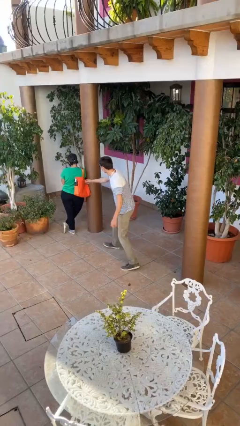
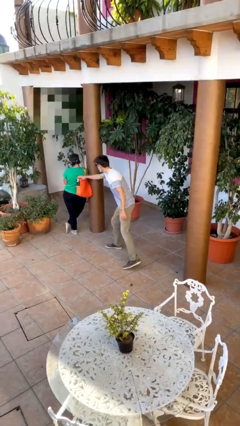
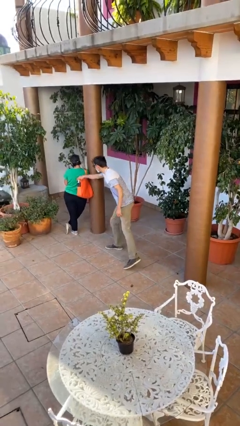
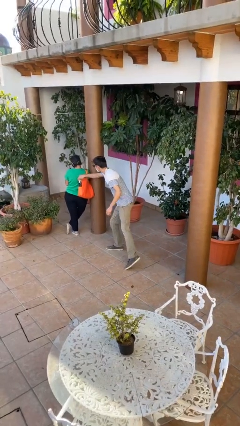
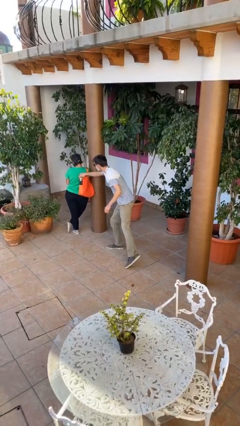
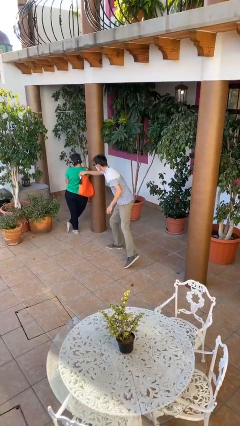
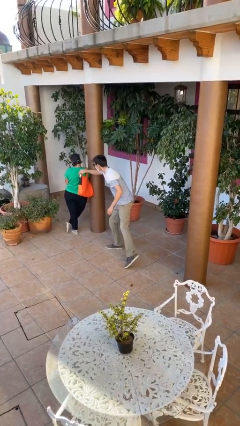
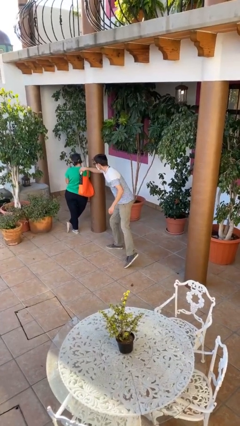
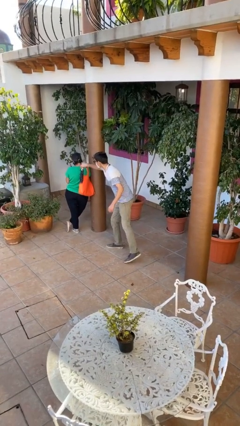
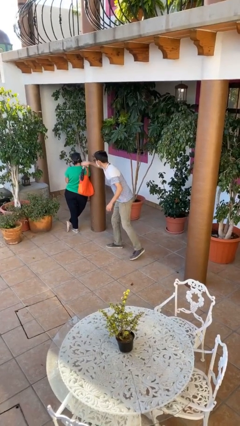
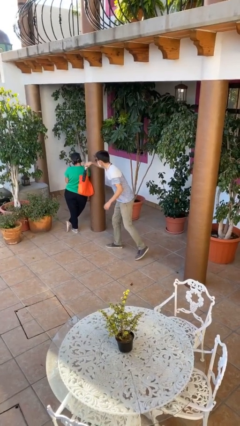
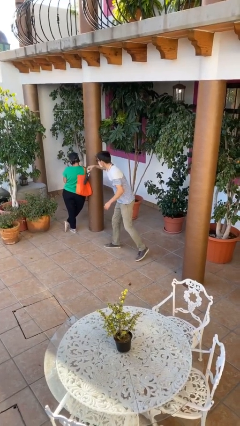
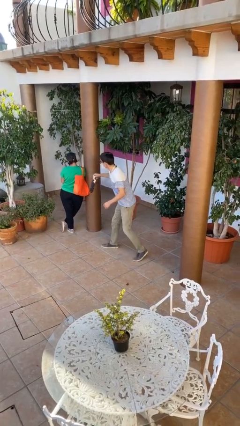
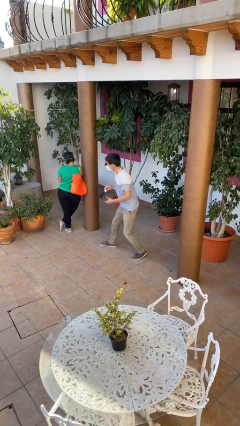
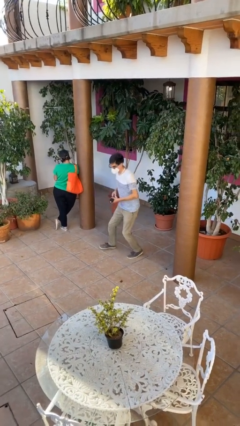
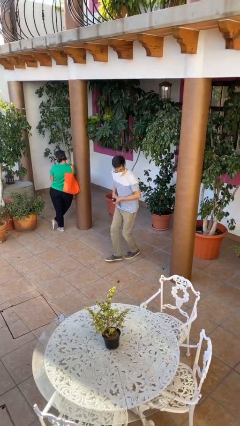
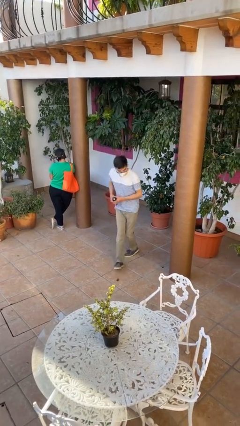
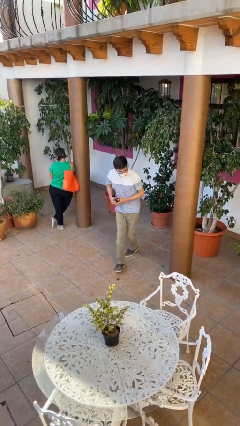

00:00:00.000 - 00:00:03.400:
person steals object from person

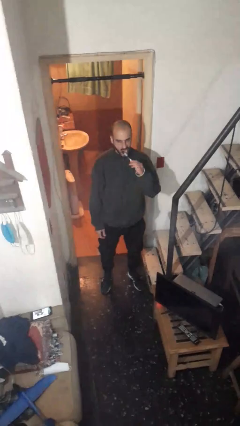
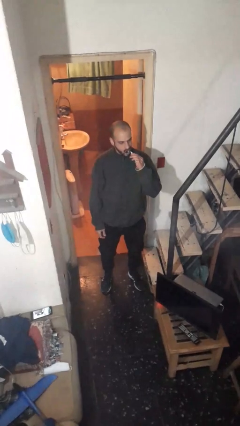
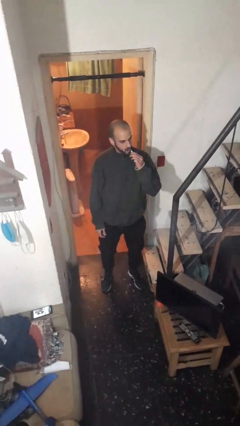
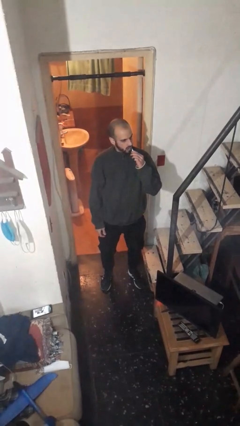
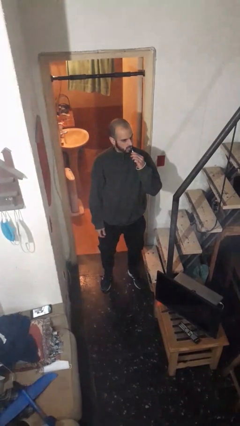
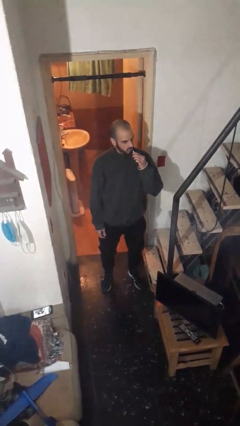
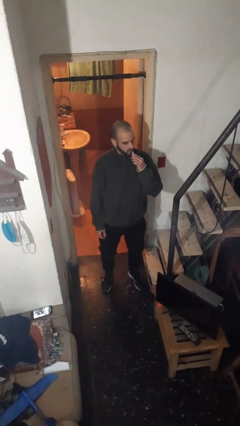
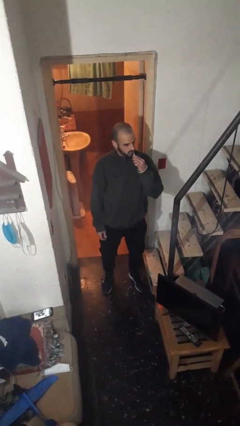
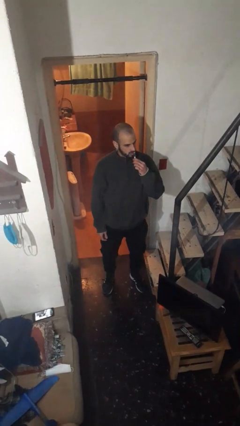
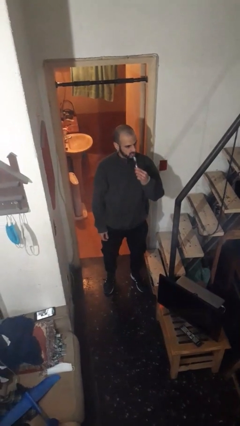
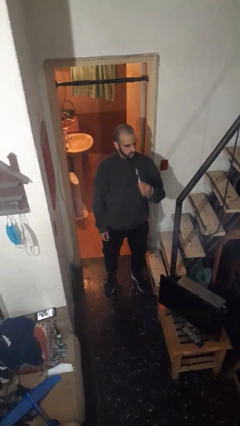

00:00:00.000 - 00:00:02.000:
person brushes teeth

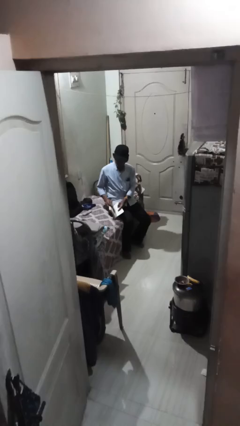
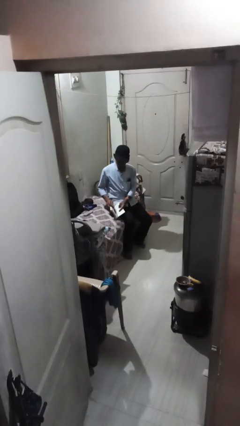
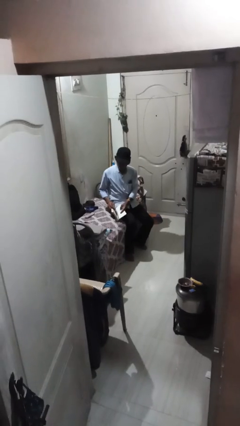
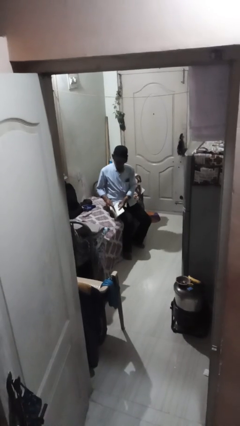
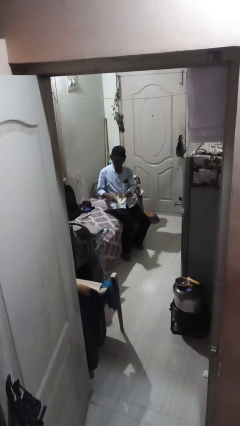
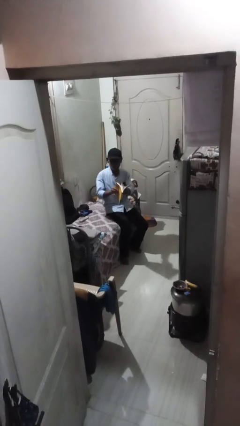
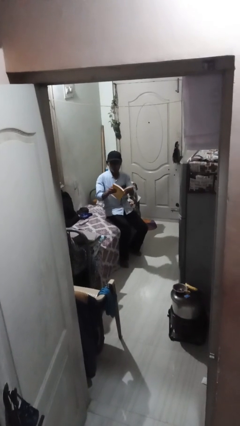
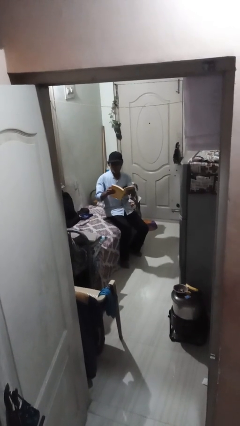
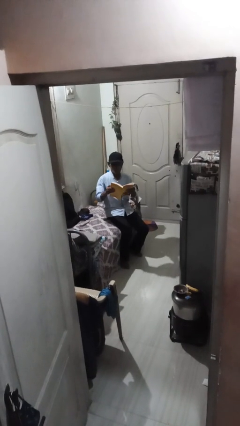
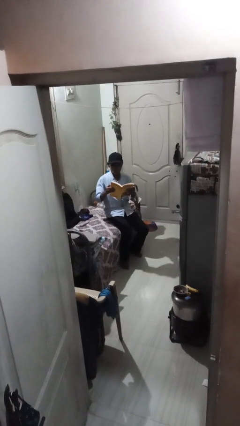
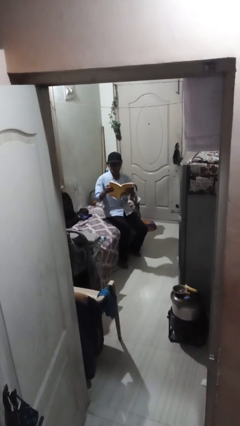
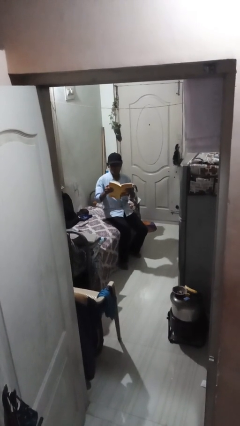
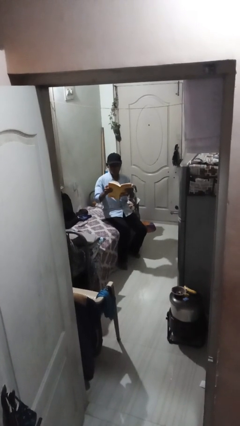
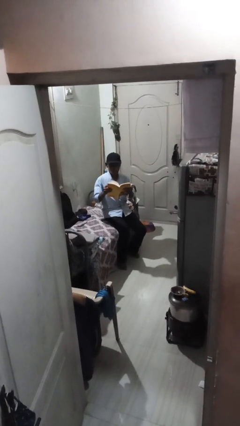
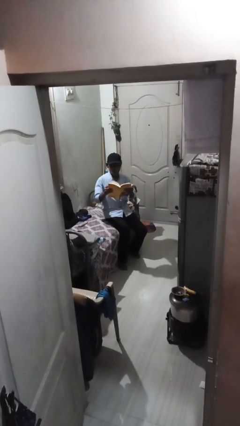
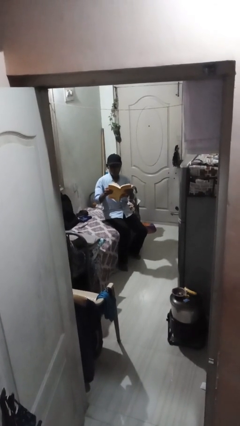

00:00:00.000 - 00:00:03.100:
person reads book

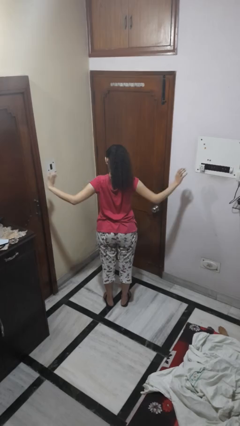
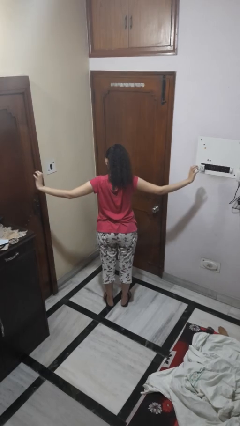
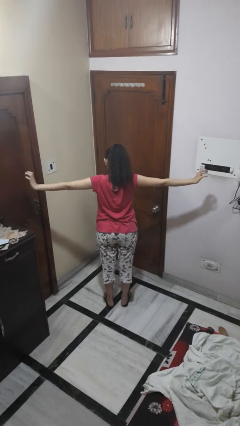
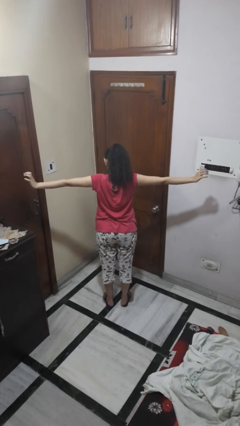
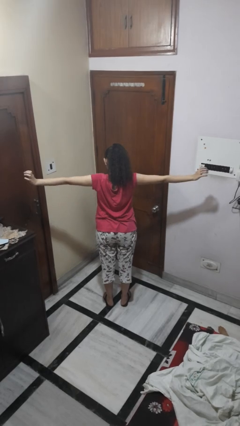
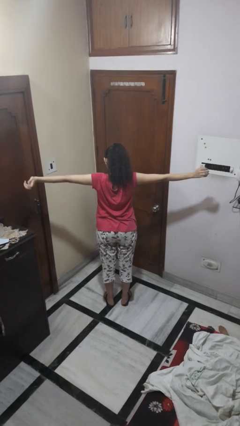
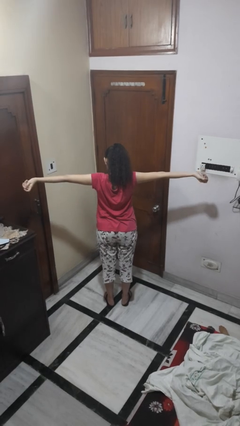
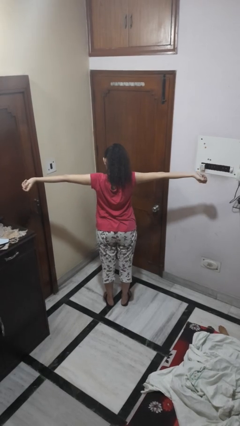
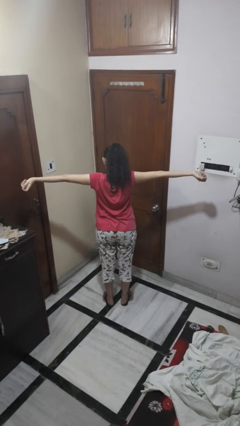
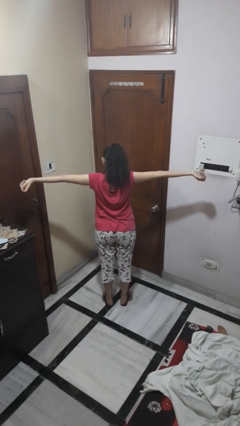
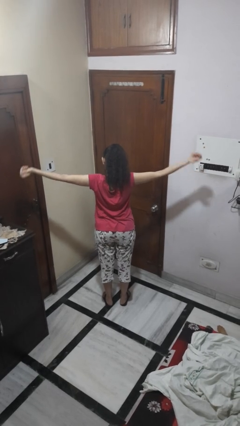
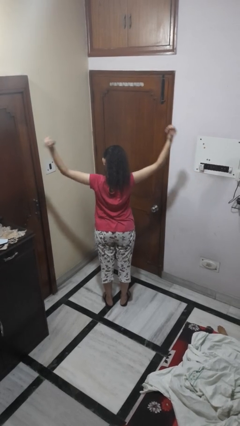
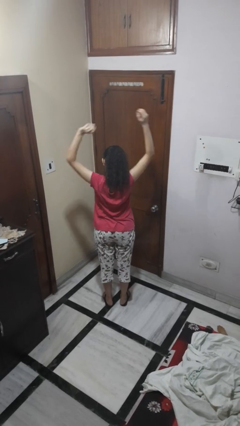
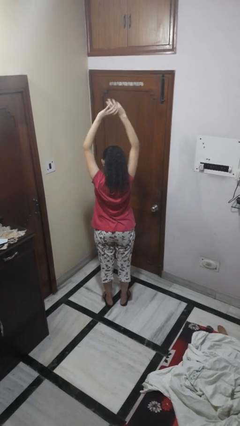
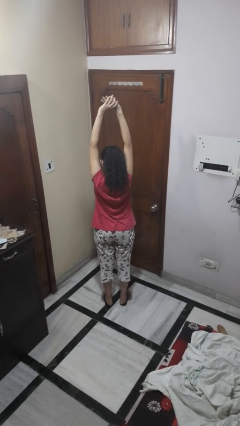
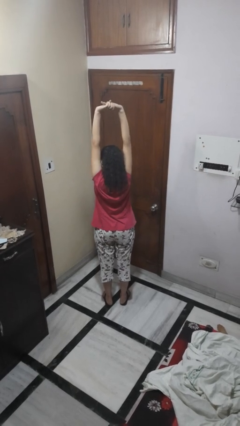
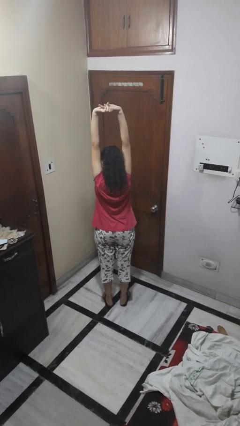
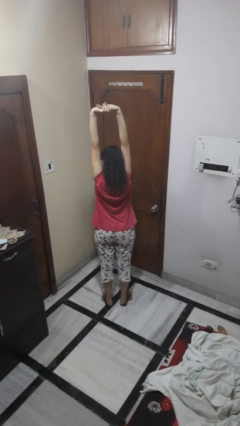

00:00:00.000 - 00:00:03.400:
person stretches arms to side

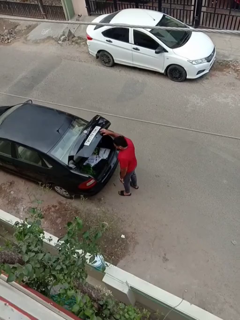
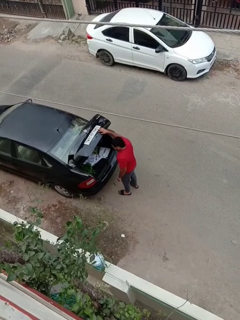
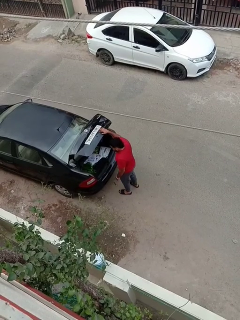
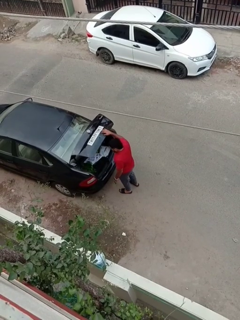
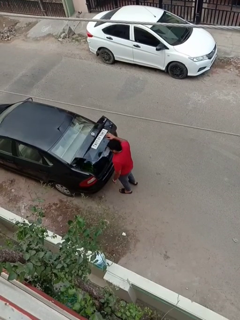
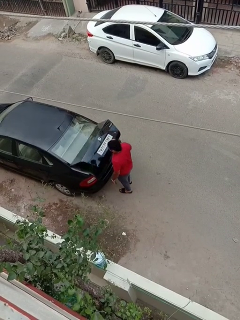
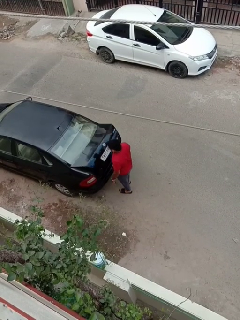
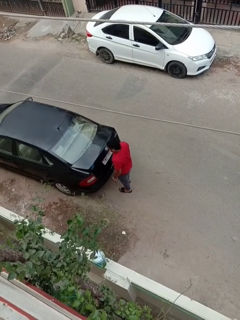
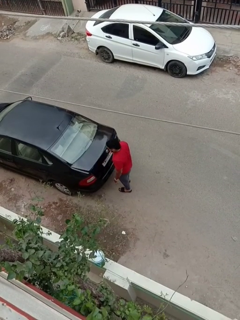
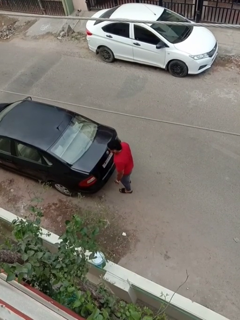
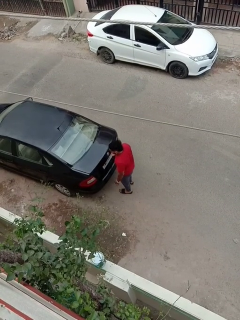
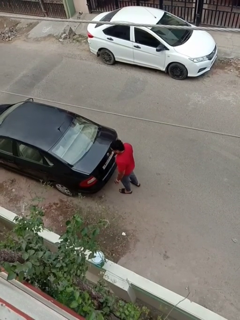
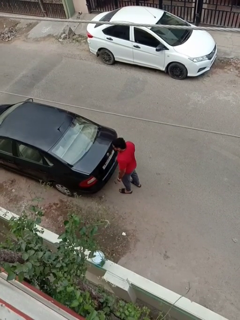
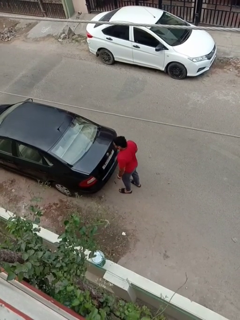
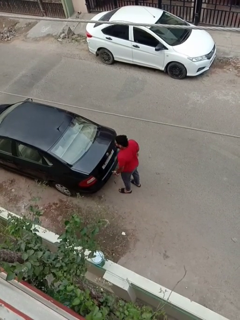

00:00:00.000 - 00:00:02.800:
person closes car trunk

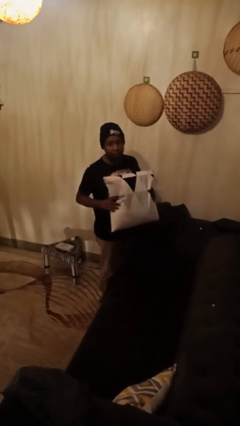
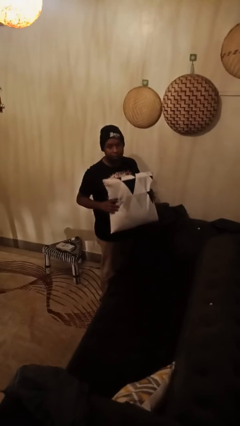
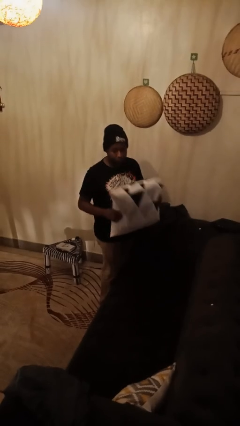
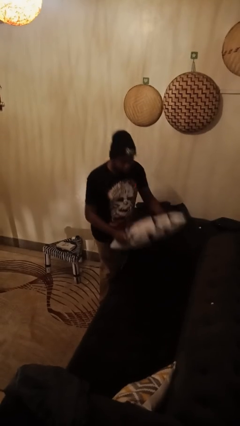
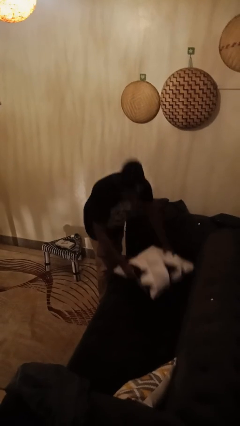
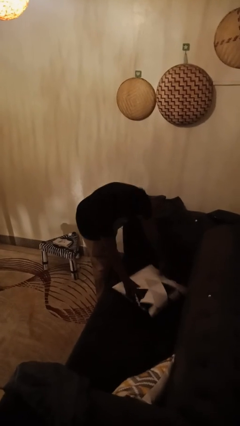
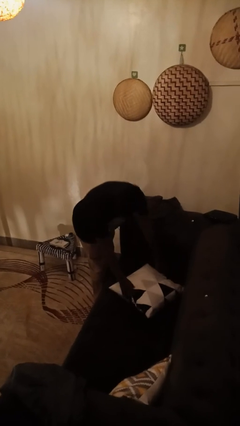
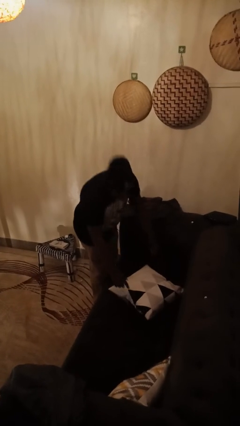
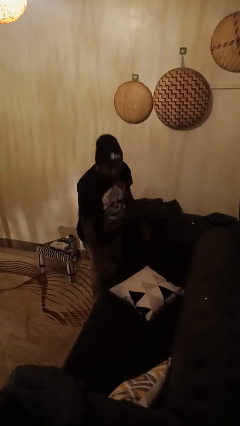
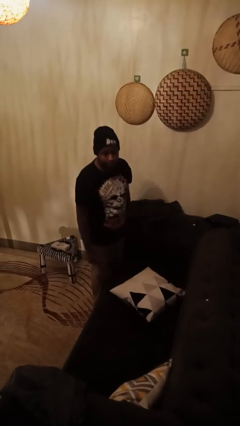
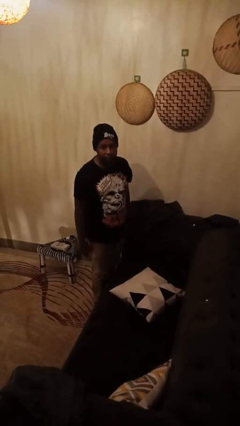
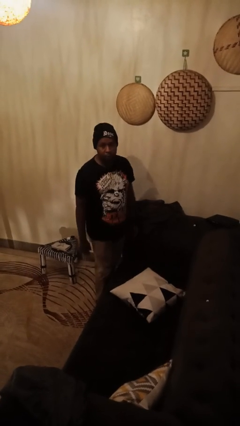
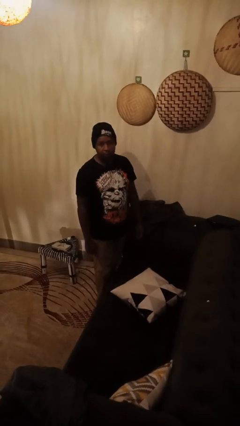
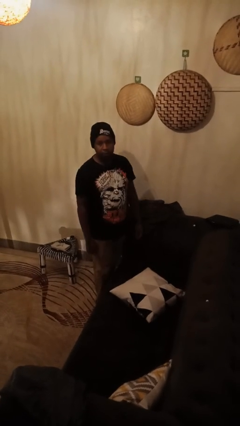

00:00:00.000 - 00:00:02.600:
person puts down object on couch

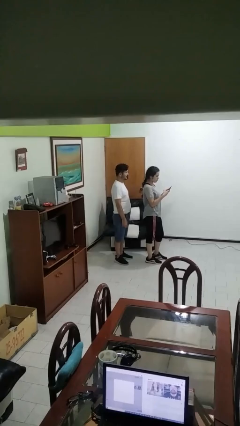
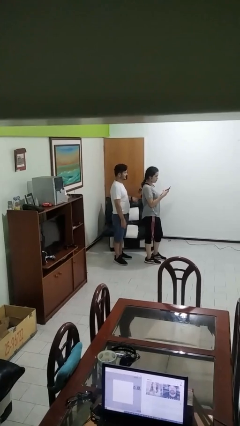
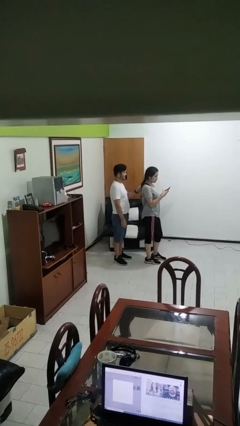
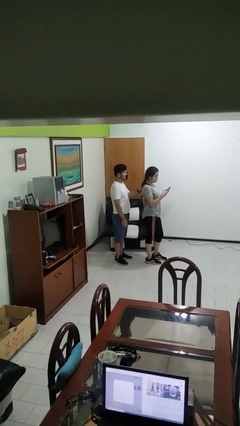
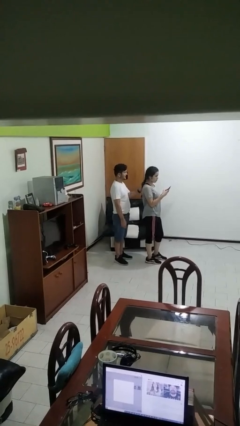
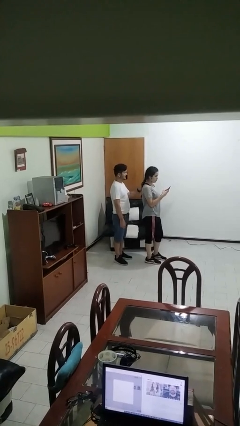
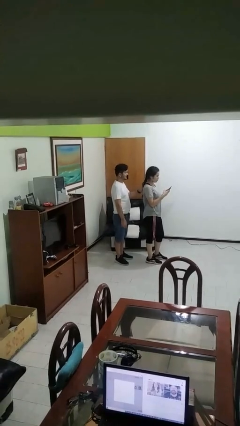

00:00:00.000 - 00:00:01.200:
person touches back of person
